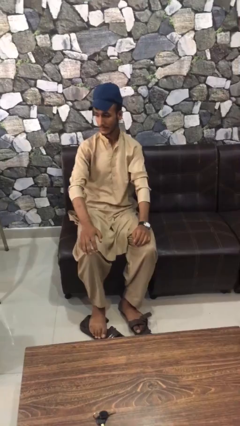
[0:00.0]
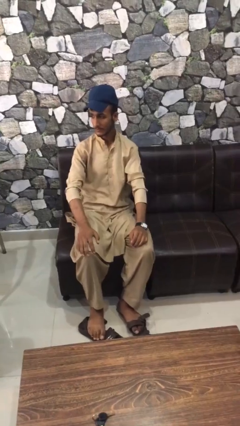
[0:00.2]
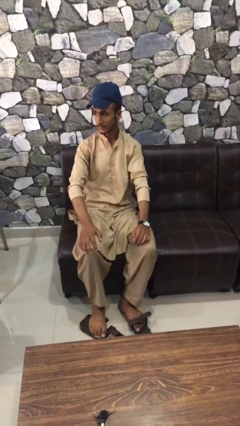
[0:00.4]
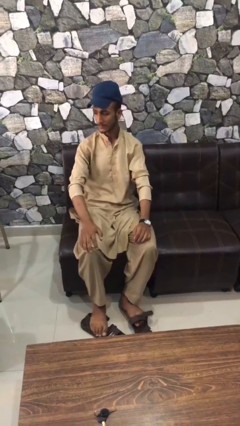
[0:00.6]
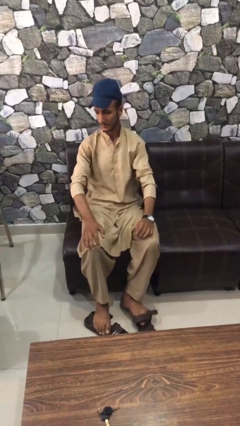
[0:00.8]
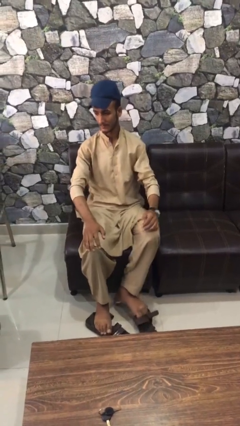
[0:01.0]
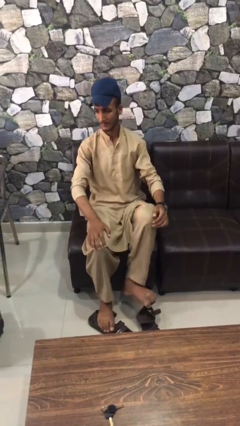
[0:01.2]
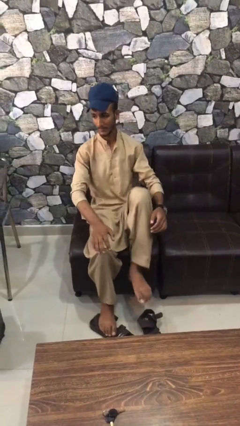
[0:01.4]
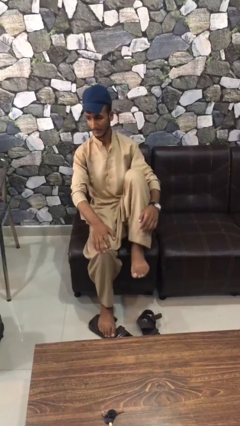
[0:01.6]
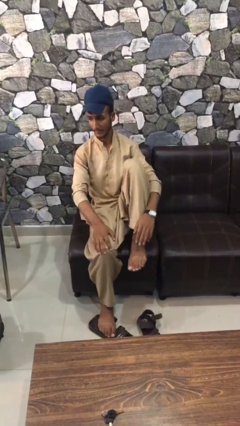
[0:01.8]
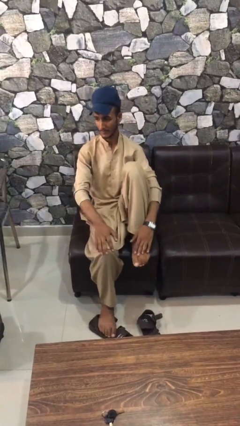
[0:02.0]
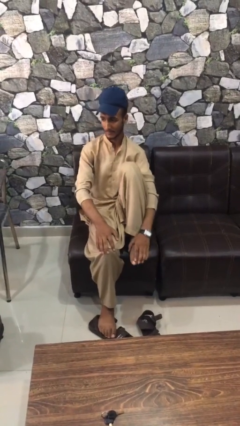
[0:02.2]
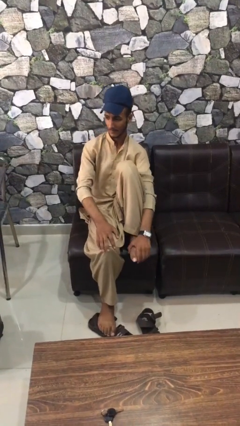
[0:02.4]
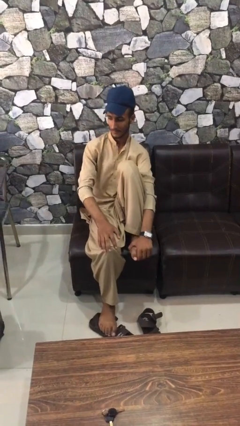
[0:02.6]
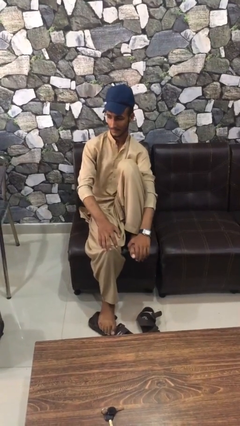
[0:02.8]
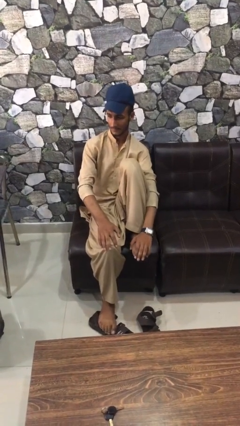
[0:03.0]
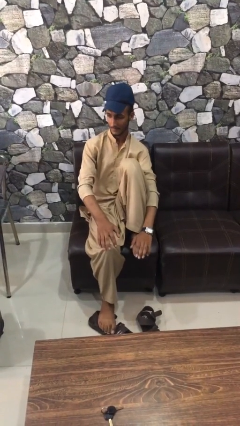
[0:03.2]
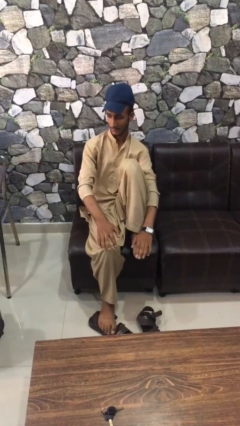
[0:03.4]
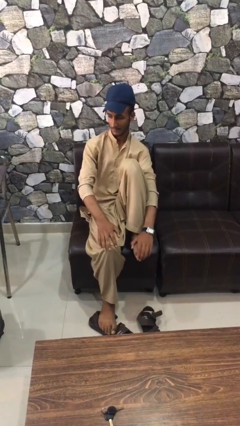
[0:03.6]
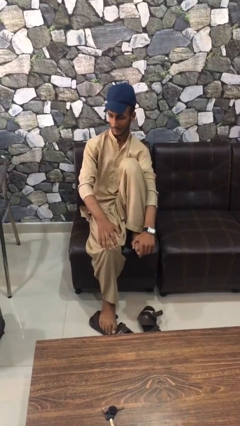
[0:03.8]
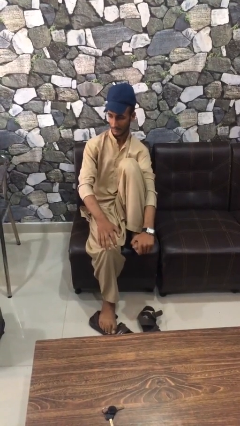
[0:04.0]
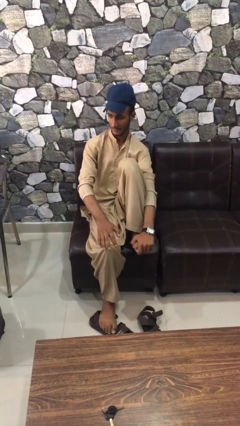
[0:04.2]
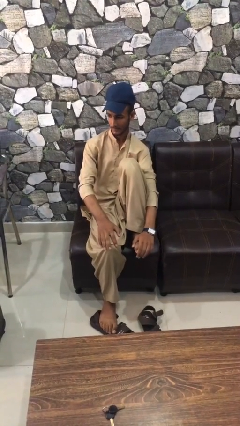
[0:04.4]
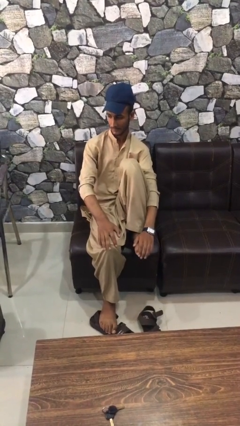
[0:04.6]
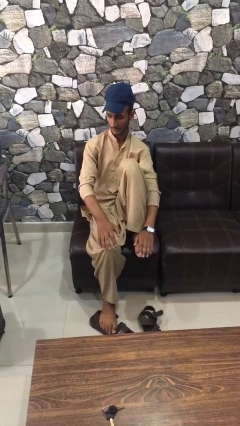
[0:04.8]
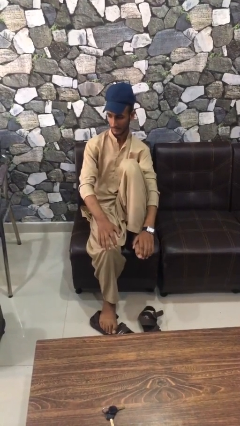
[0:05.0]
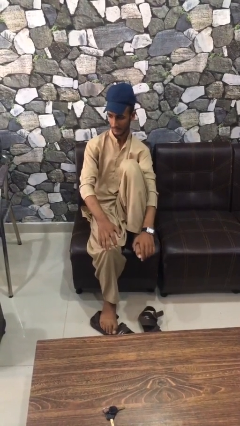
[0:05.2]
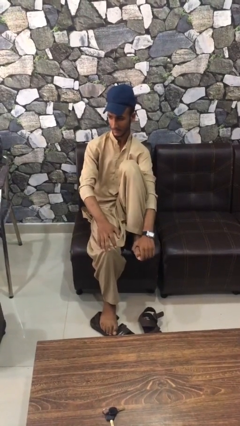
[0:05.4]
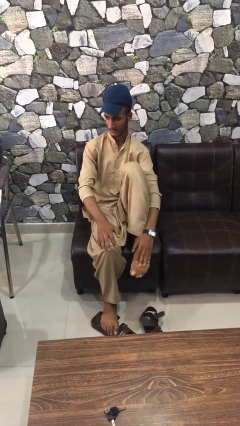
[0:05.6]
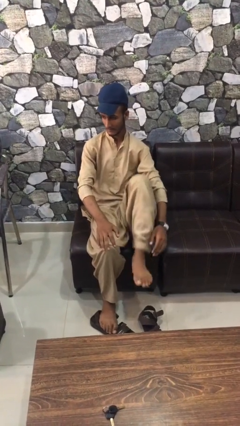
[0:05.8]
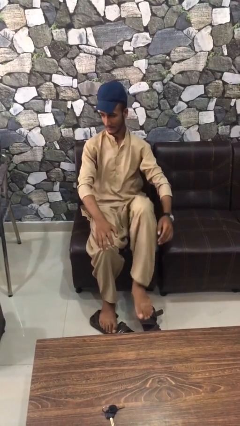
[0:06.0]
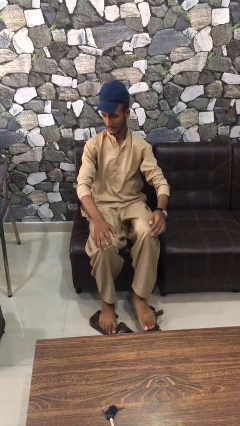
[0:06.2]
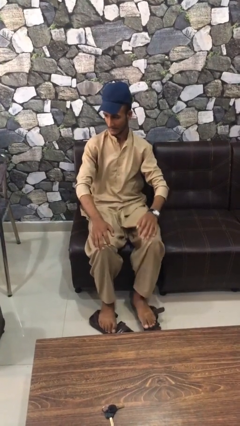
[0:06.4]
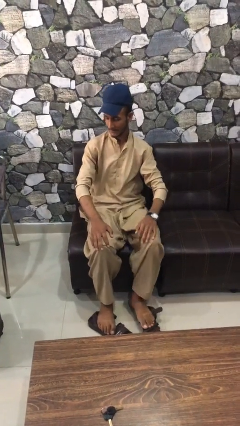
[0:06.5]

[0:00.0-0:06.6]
person rubs foot

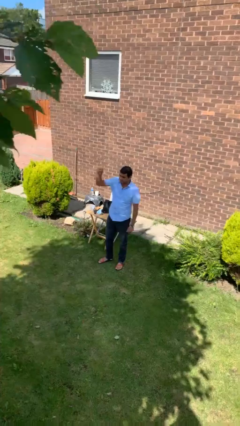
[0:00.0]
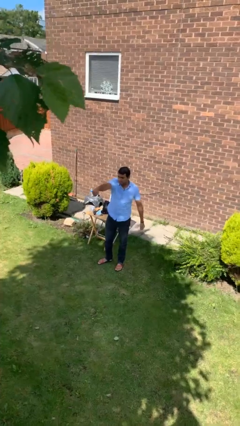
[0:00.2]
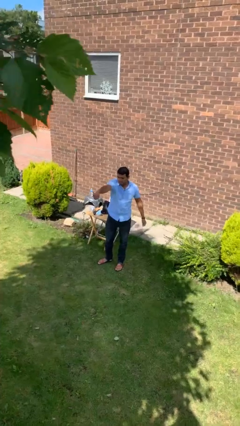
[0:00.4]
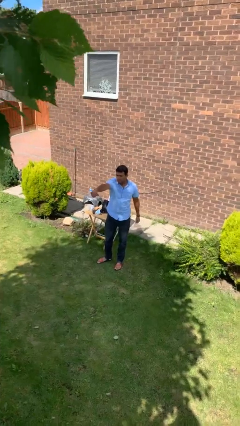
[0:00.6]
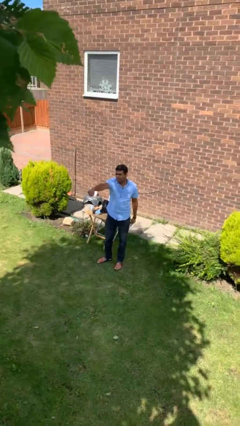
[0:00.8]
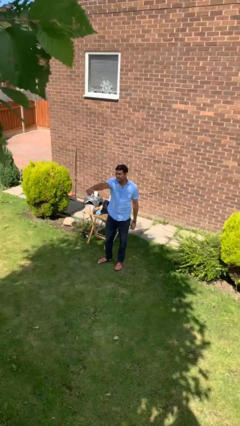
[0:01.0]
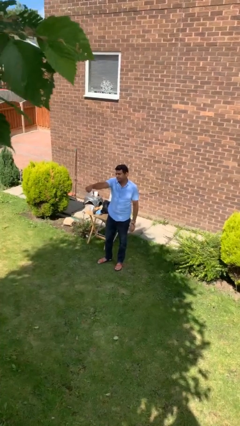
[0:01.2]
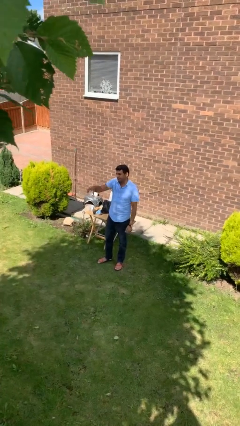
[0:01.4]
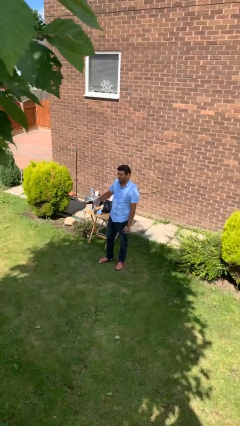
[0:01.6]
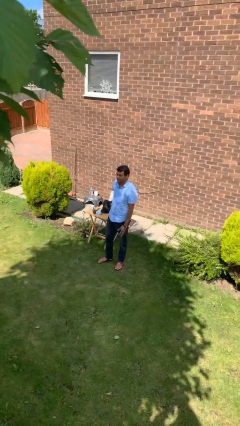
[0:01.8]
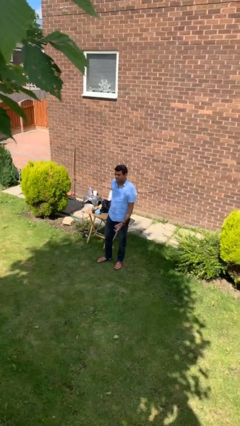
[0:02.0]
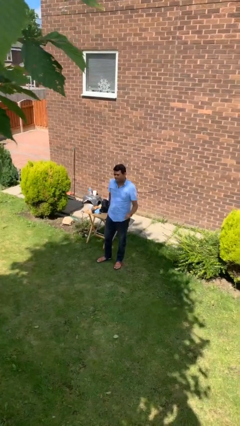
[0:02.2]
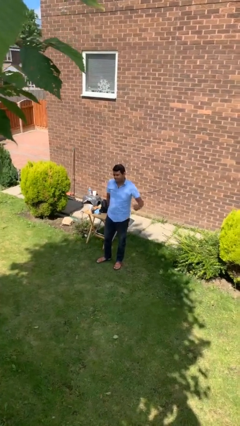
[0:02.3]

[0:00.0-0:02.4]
person punches

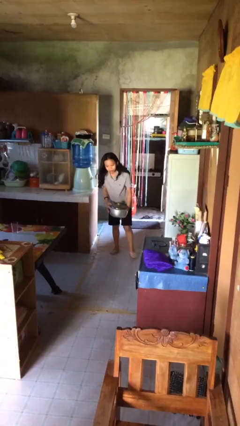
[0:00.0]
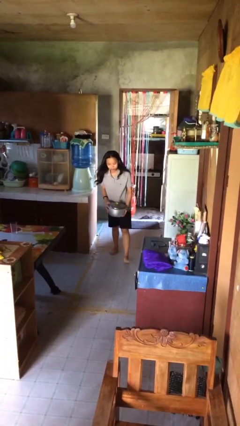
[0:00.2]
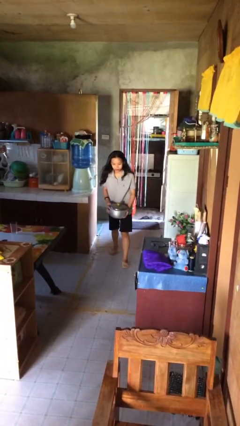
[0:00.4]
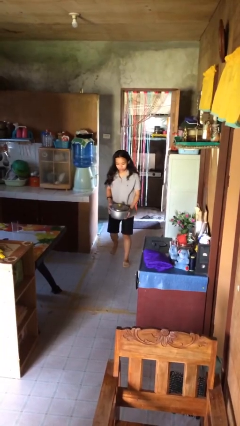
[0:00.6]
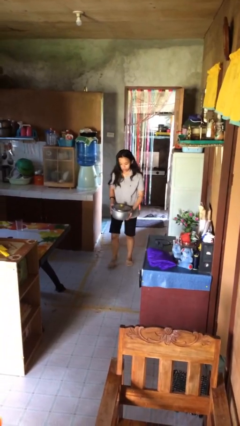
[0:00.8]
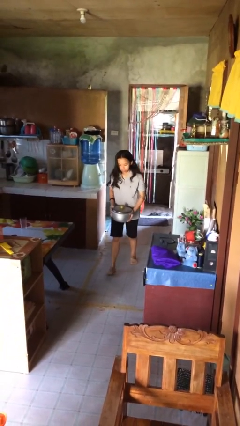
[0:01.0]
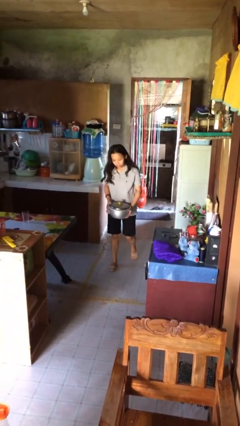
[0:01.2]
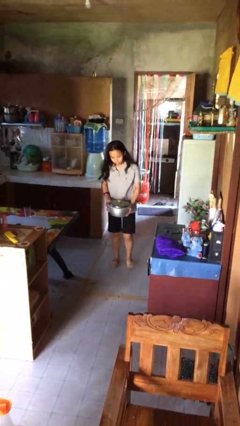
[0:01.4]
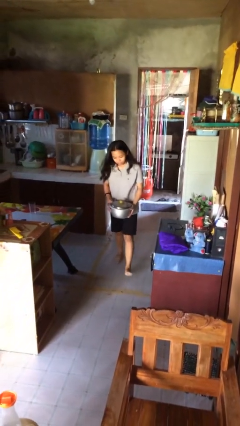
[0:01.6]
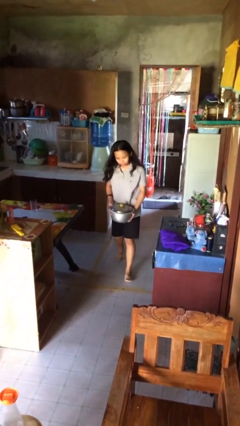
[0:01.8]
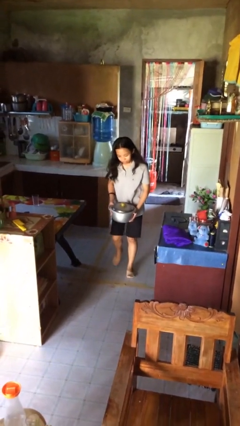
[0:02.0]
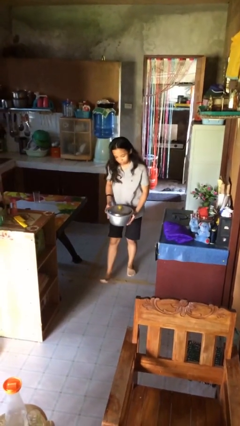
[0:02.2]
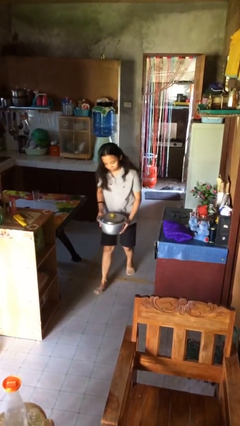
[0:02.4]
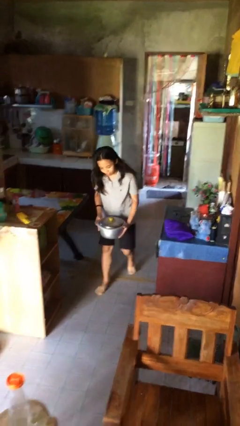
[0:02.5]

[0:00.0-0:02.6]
person carries heavy object

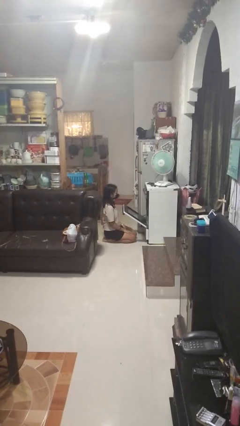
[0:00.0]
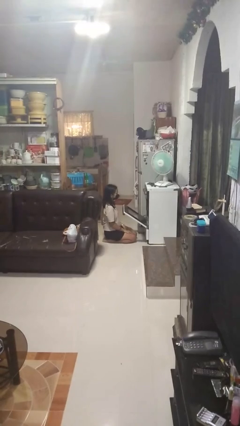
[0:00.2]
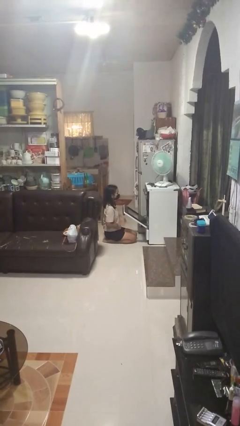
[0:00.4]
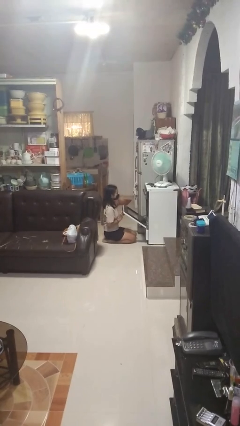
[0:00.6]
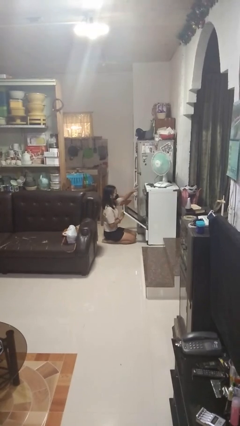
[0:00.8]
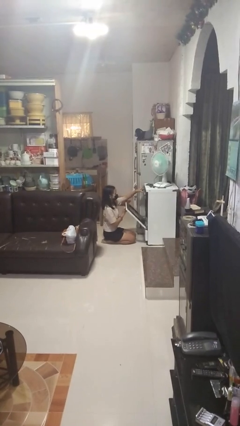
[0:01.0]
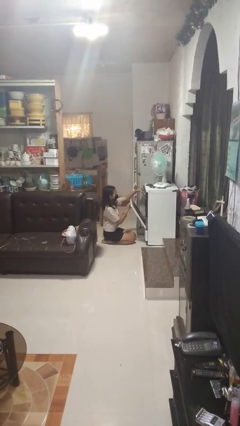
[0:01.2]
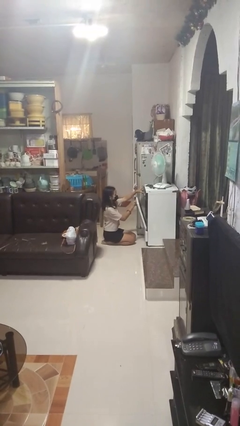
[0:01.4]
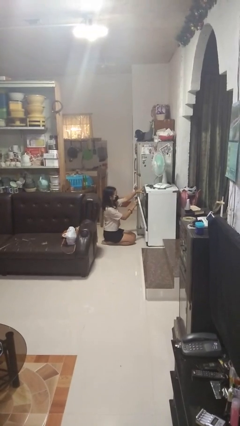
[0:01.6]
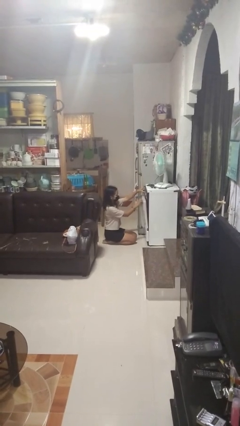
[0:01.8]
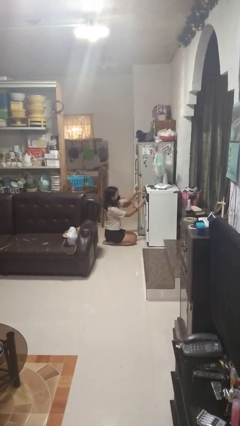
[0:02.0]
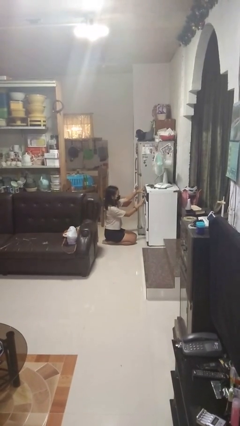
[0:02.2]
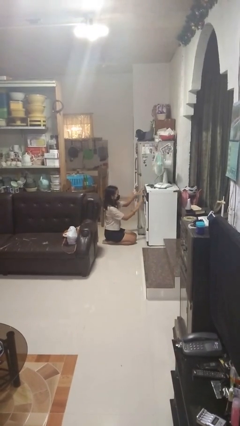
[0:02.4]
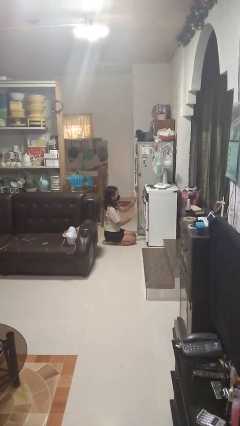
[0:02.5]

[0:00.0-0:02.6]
person closes oven door

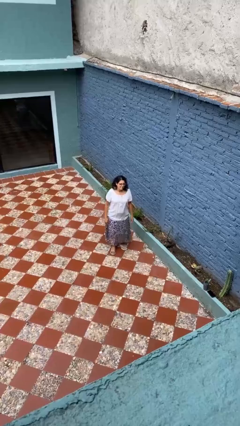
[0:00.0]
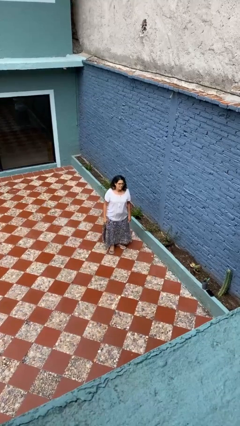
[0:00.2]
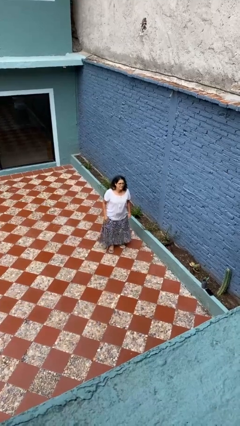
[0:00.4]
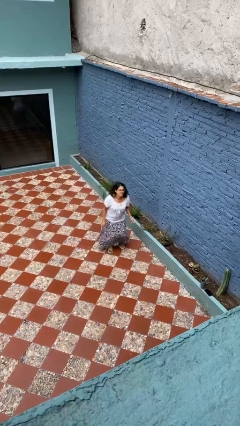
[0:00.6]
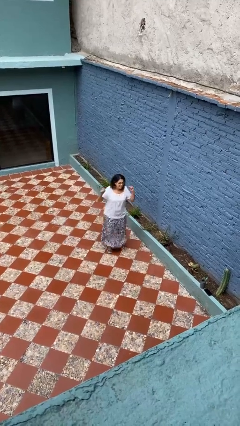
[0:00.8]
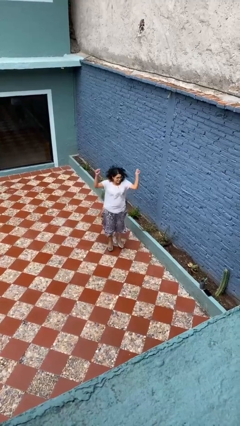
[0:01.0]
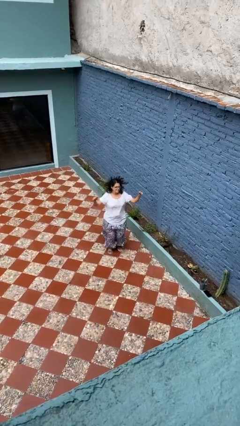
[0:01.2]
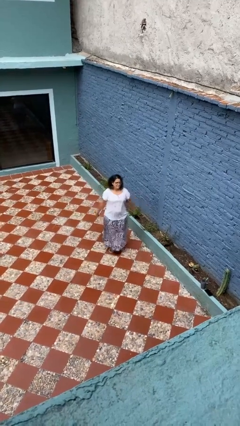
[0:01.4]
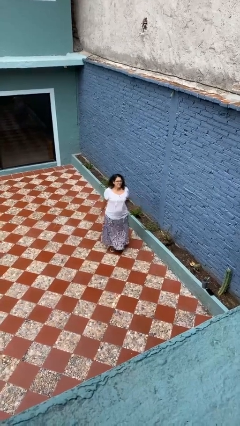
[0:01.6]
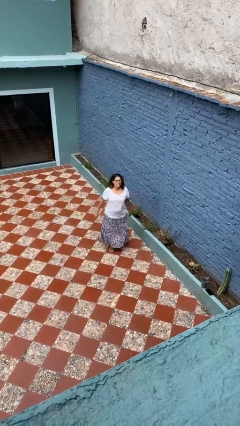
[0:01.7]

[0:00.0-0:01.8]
person jumps

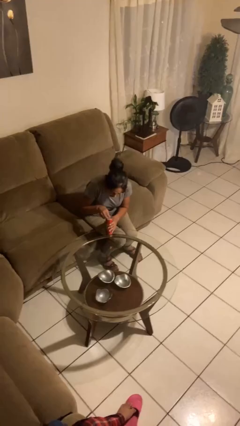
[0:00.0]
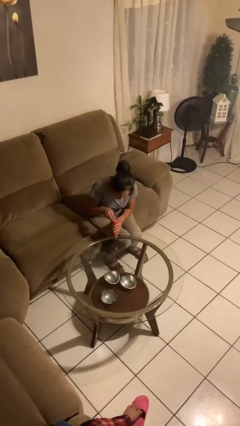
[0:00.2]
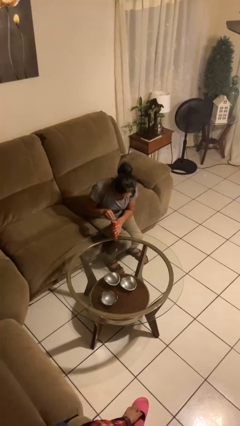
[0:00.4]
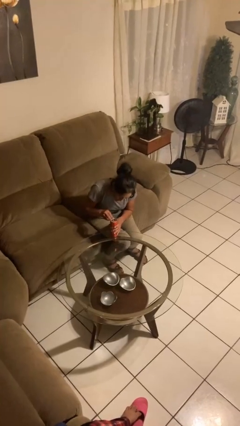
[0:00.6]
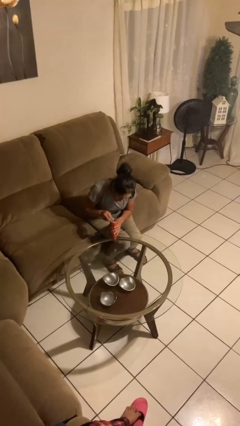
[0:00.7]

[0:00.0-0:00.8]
person opens beverage can

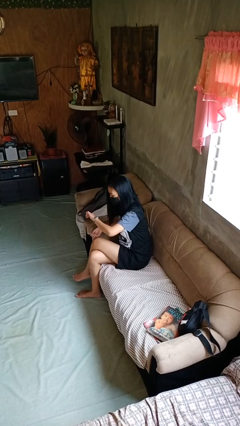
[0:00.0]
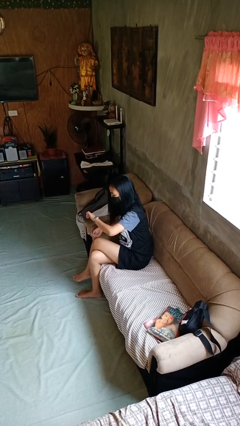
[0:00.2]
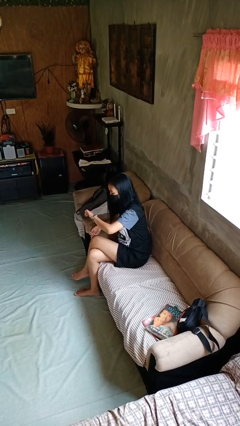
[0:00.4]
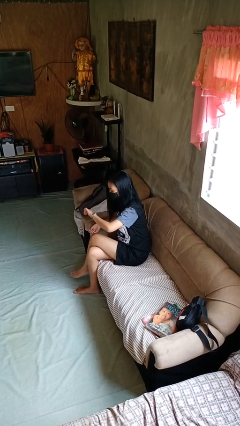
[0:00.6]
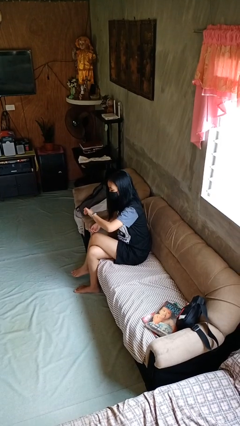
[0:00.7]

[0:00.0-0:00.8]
person looks at wristwatch
